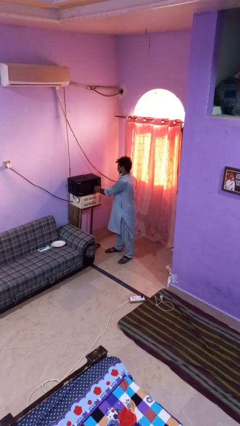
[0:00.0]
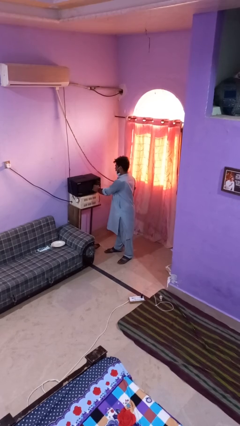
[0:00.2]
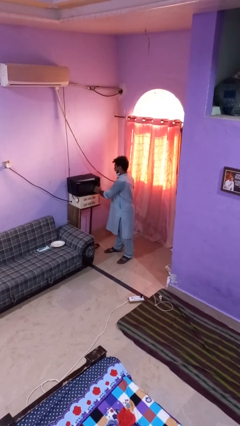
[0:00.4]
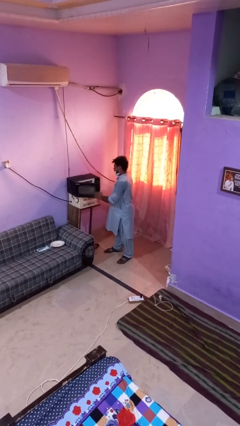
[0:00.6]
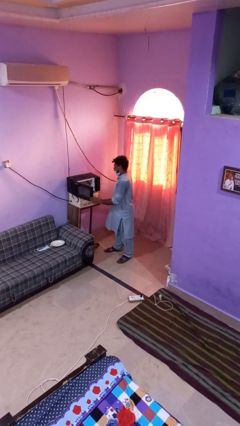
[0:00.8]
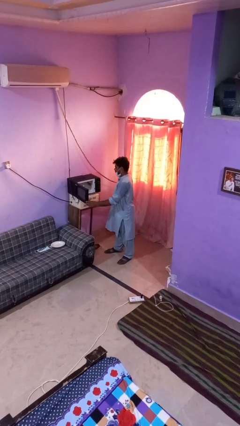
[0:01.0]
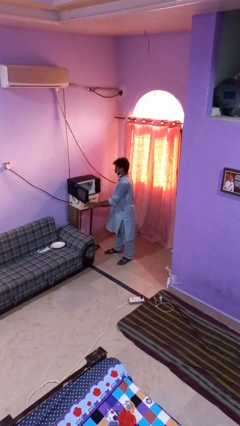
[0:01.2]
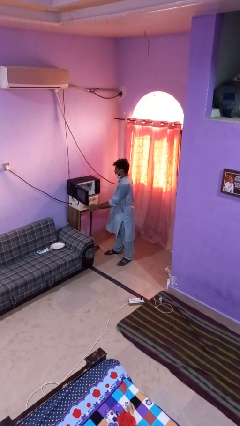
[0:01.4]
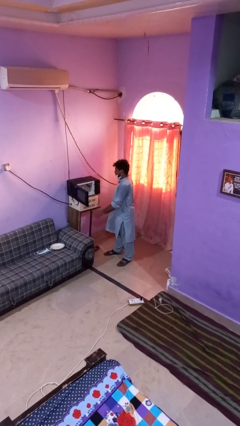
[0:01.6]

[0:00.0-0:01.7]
person opens oven door

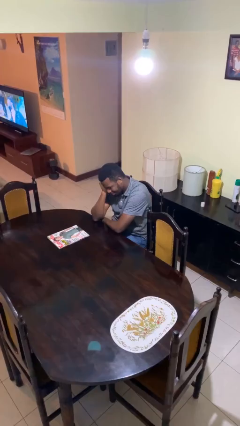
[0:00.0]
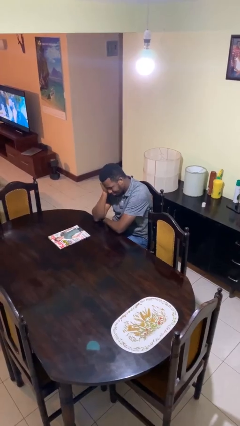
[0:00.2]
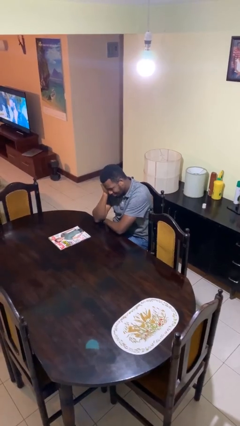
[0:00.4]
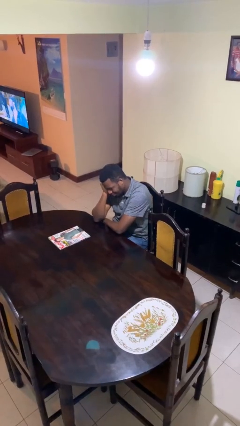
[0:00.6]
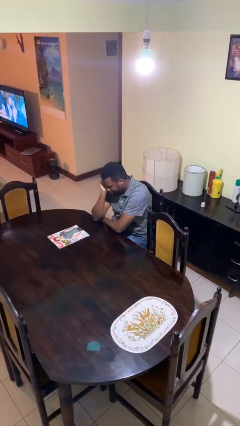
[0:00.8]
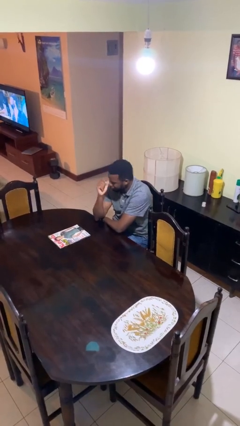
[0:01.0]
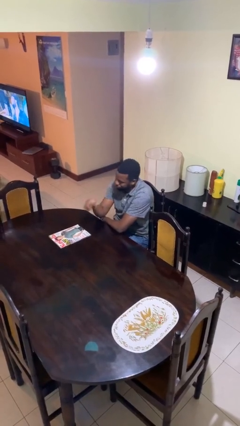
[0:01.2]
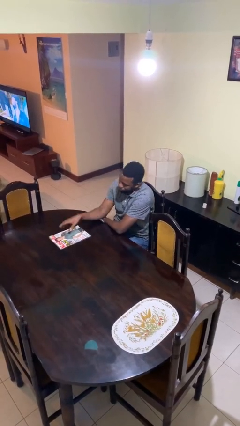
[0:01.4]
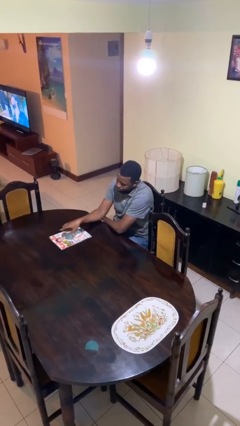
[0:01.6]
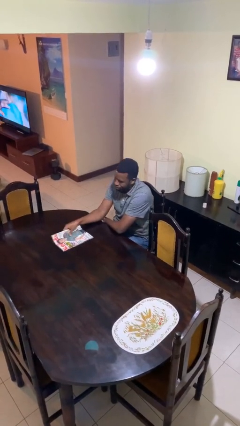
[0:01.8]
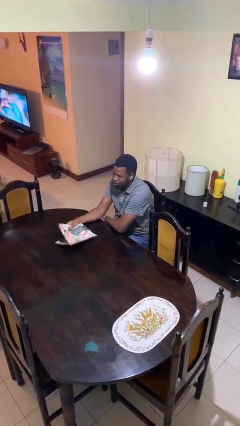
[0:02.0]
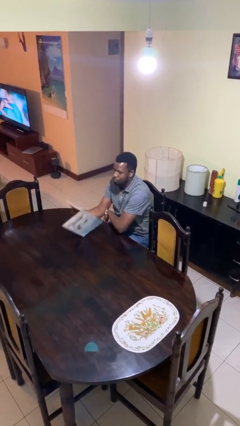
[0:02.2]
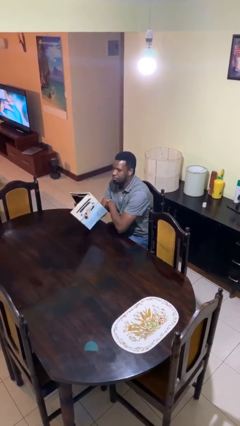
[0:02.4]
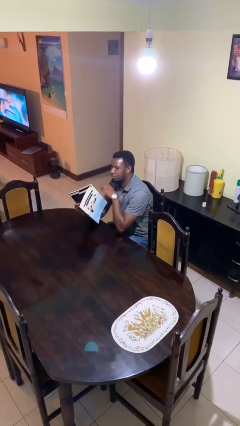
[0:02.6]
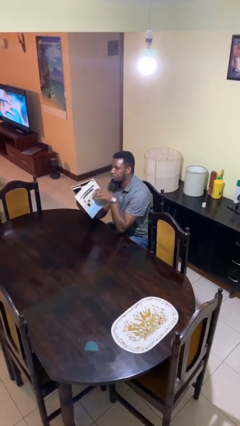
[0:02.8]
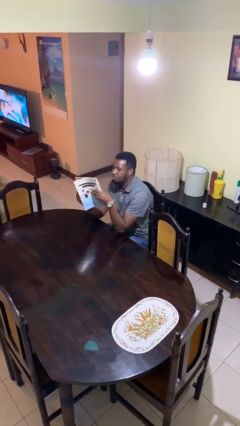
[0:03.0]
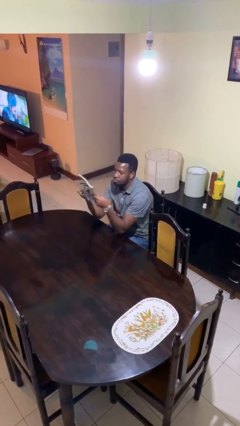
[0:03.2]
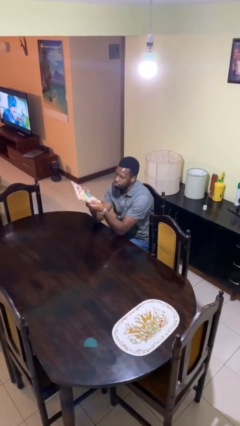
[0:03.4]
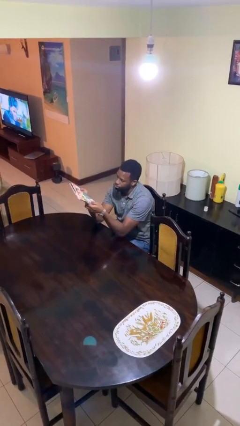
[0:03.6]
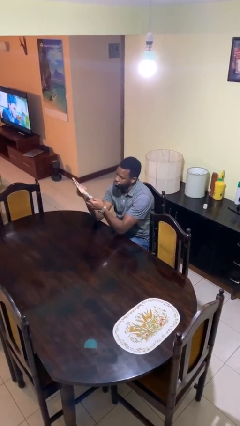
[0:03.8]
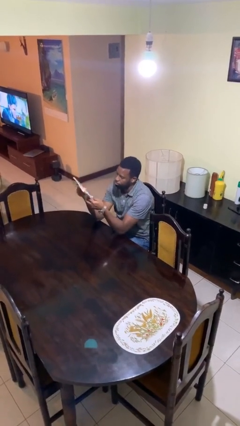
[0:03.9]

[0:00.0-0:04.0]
person picks up object from table

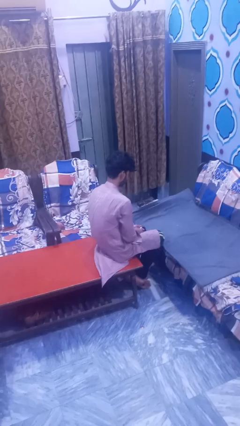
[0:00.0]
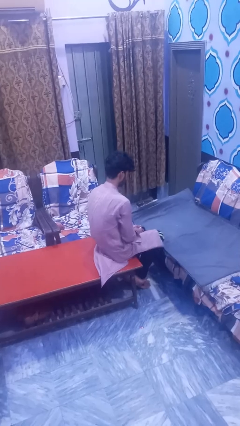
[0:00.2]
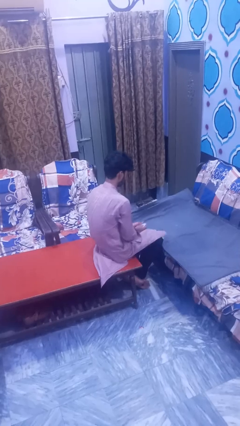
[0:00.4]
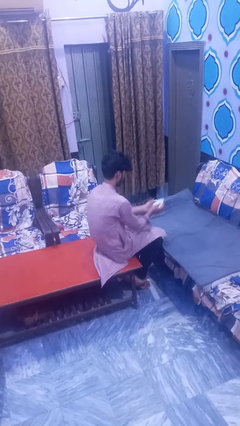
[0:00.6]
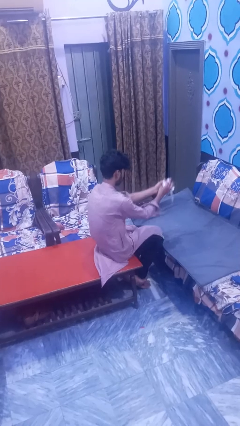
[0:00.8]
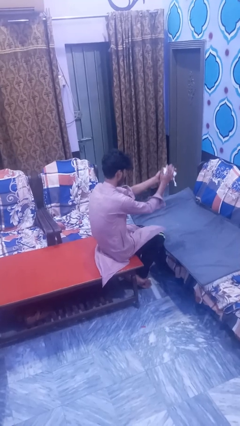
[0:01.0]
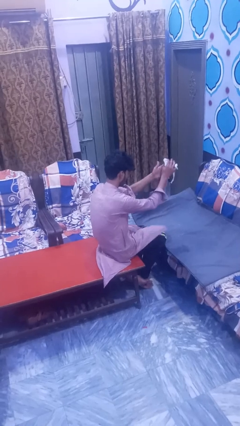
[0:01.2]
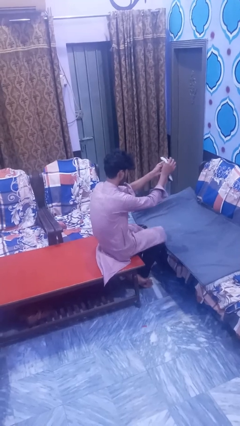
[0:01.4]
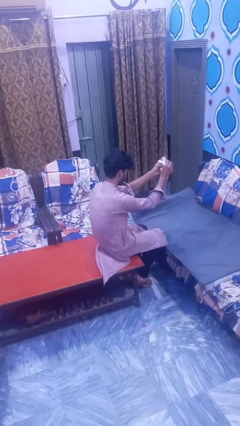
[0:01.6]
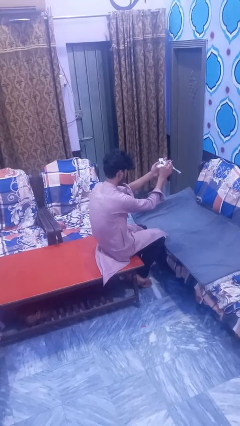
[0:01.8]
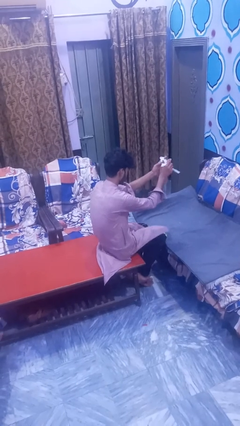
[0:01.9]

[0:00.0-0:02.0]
person crumples paper

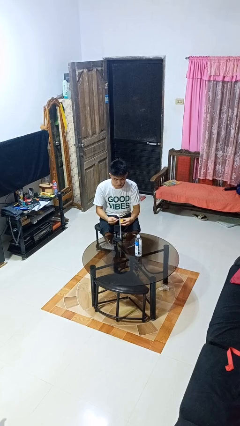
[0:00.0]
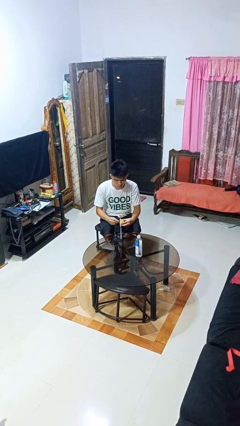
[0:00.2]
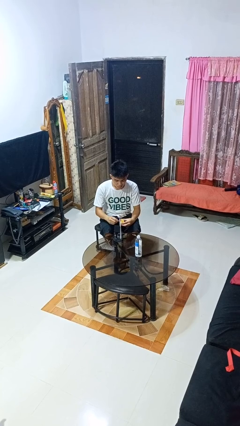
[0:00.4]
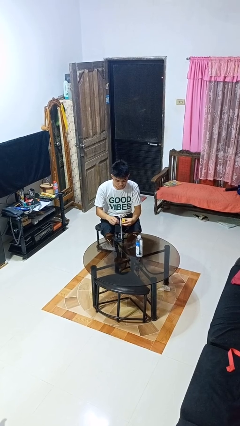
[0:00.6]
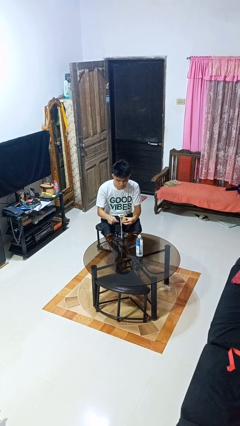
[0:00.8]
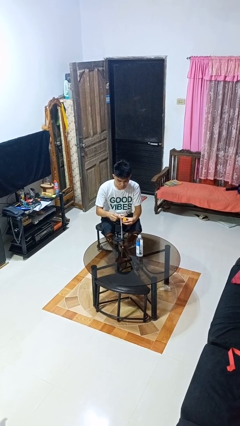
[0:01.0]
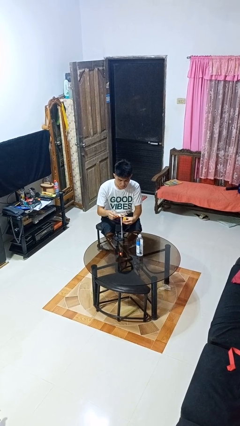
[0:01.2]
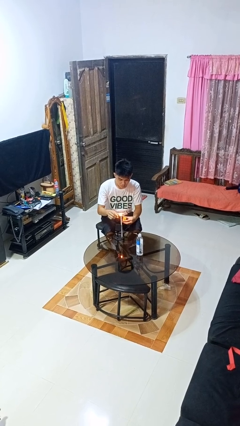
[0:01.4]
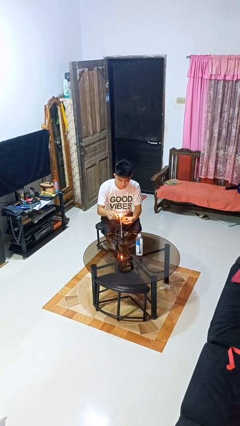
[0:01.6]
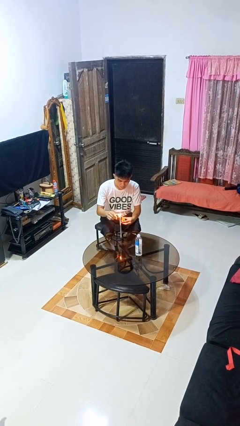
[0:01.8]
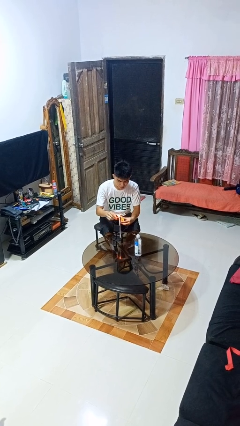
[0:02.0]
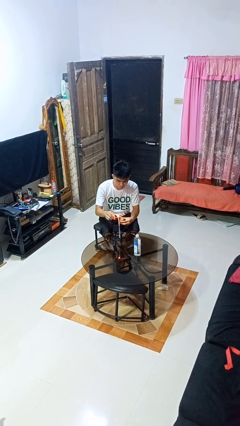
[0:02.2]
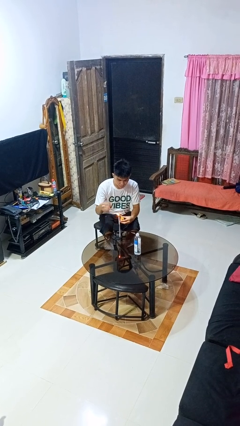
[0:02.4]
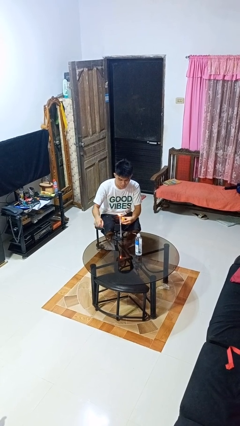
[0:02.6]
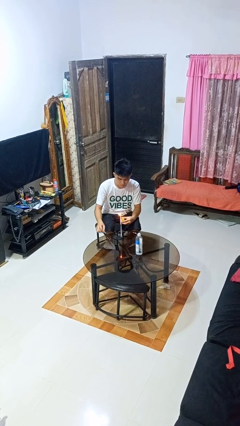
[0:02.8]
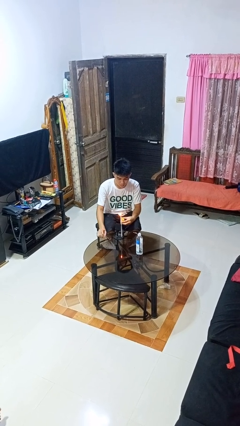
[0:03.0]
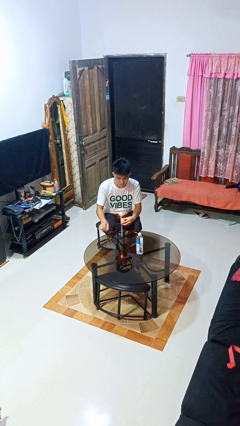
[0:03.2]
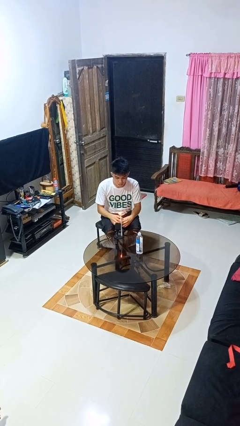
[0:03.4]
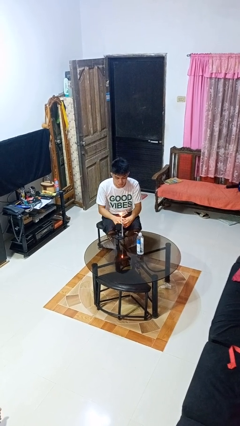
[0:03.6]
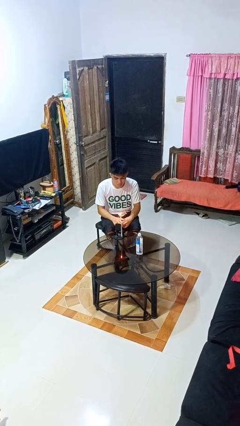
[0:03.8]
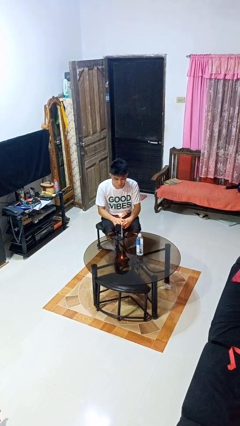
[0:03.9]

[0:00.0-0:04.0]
person lights candle

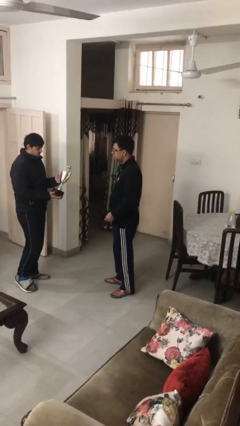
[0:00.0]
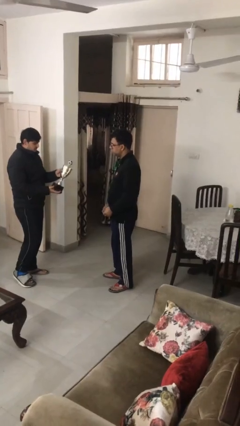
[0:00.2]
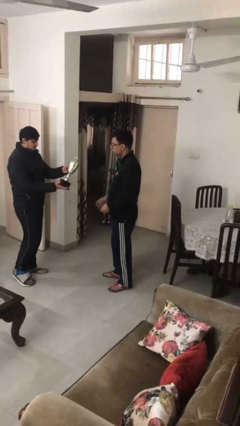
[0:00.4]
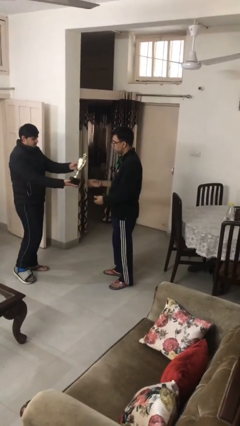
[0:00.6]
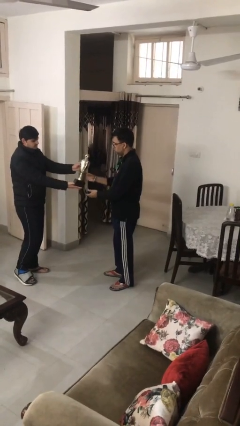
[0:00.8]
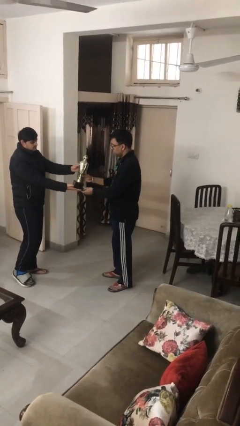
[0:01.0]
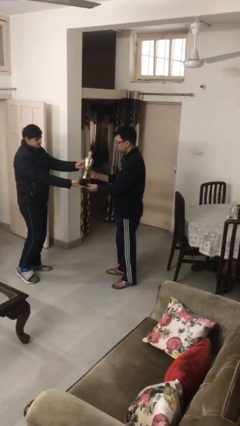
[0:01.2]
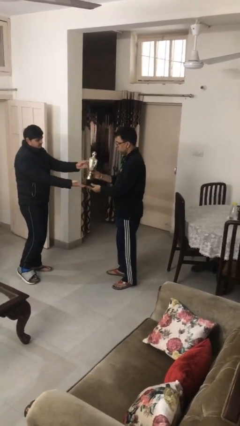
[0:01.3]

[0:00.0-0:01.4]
person transfers object to person

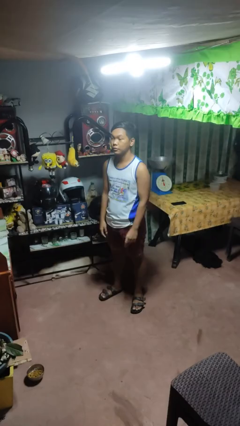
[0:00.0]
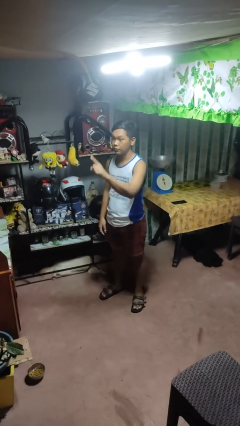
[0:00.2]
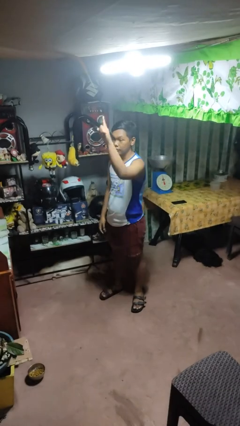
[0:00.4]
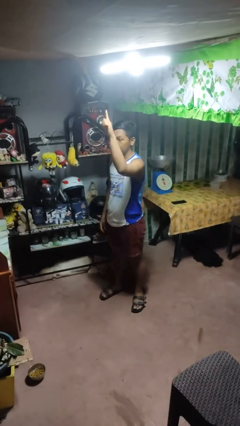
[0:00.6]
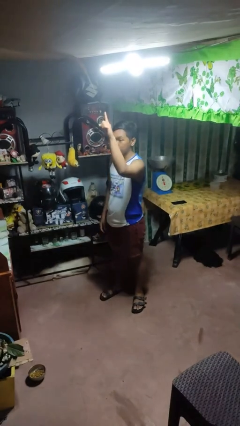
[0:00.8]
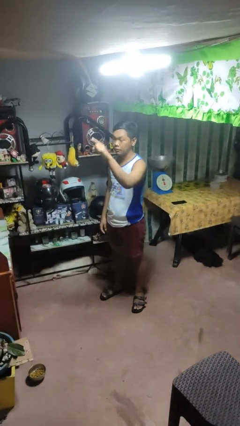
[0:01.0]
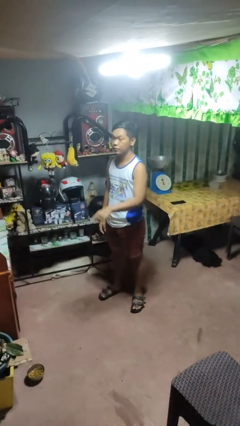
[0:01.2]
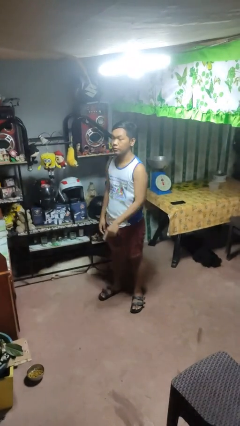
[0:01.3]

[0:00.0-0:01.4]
person gestures number one

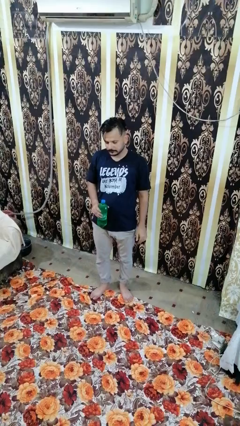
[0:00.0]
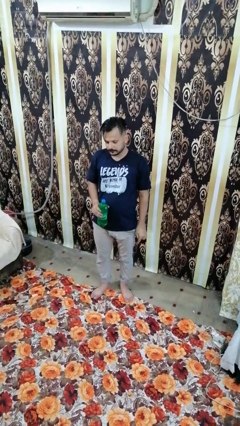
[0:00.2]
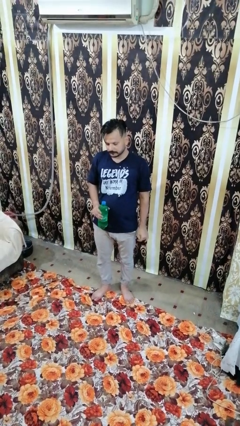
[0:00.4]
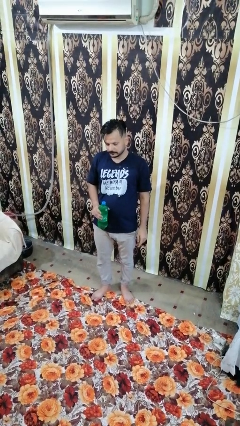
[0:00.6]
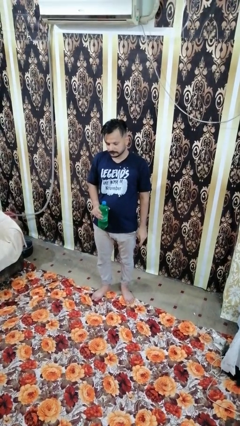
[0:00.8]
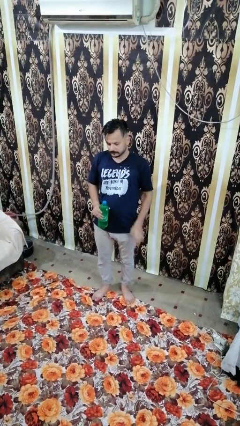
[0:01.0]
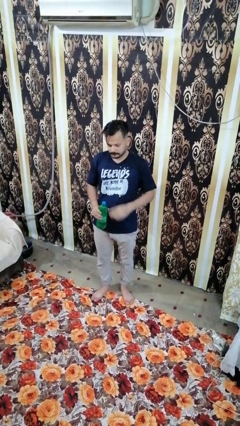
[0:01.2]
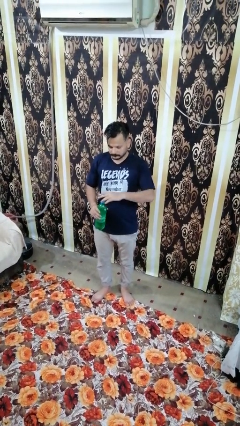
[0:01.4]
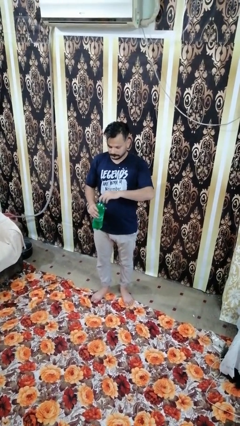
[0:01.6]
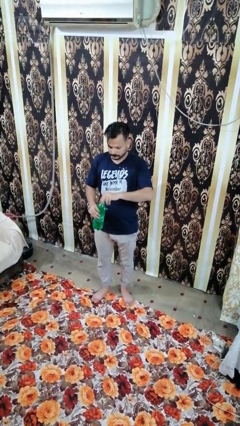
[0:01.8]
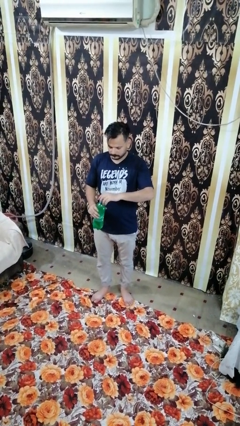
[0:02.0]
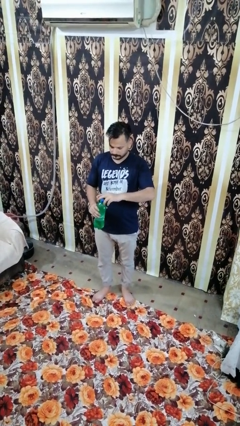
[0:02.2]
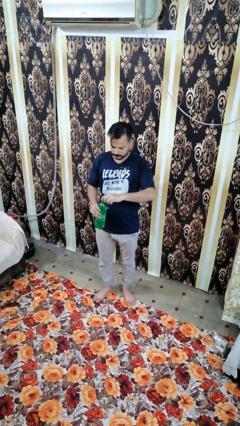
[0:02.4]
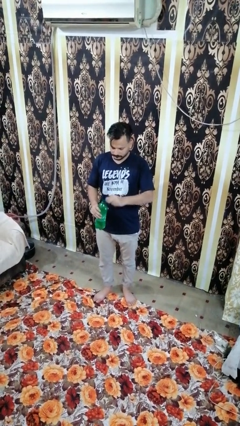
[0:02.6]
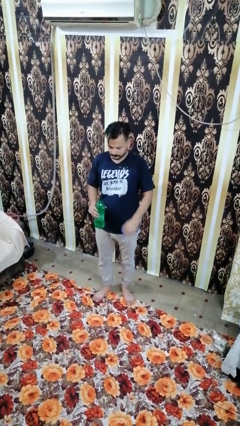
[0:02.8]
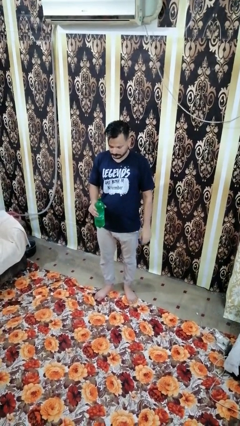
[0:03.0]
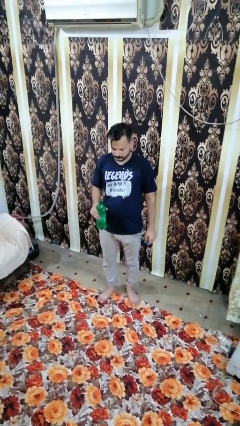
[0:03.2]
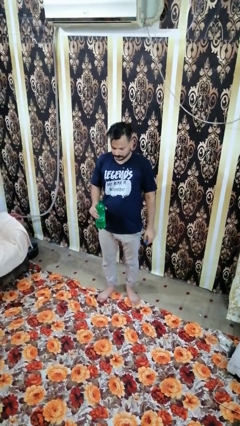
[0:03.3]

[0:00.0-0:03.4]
person opens beverage can
